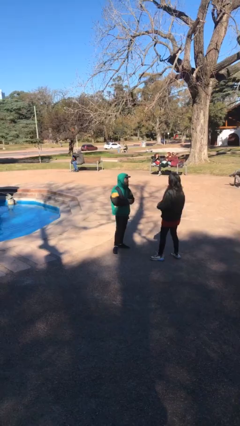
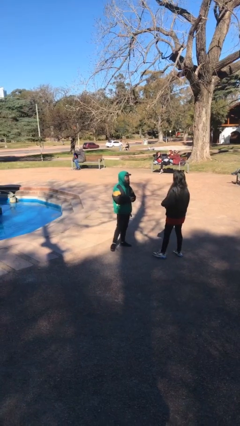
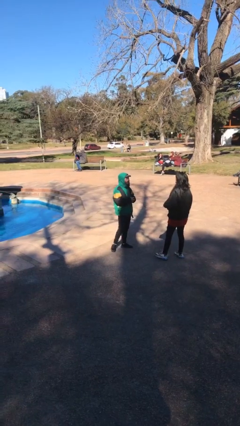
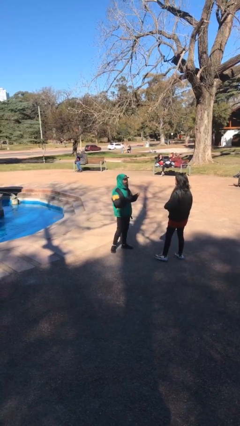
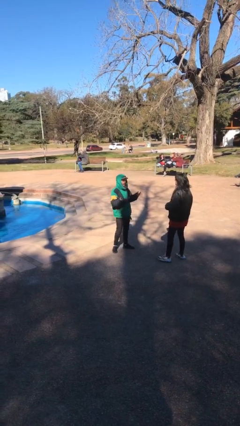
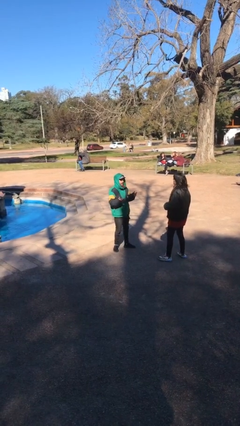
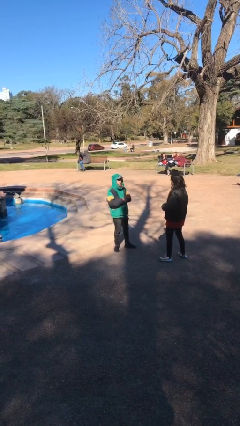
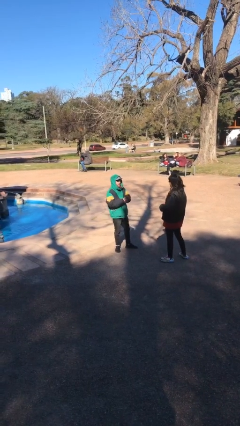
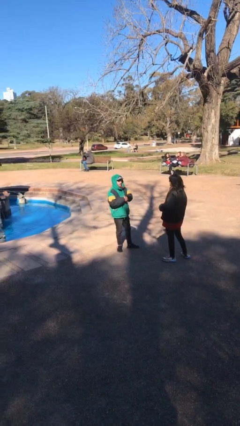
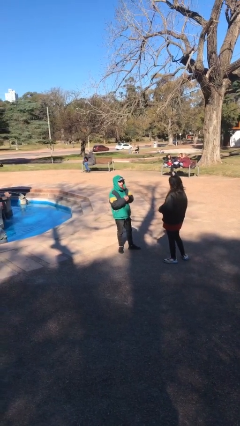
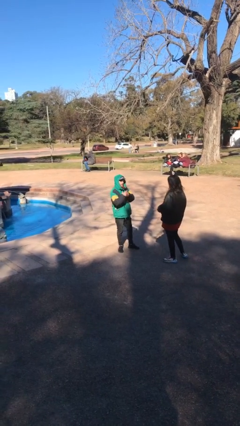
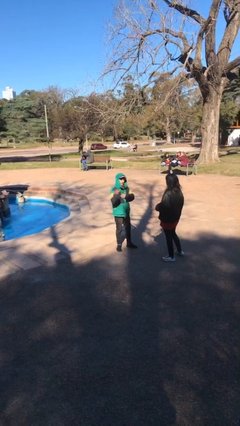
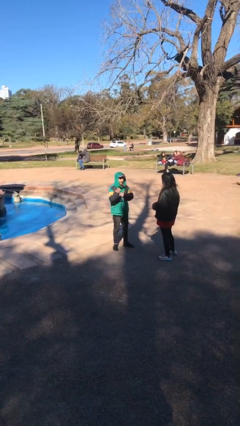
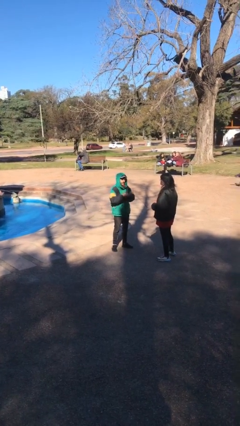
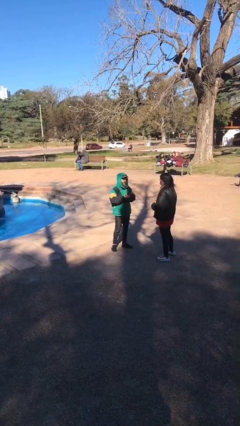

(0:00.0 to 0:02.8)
person talks to person

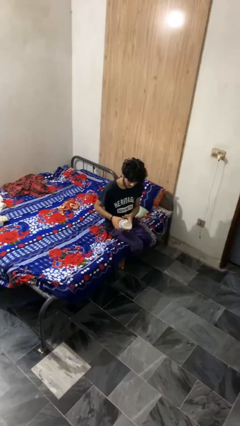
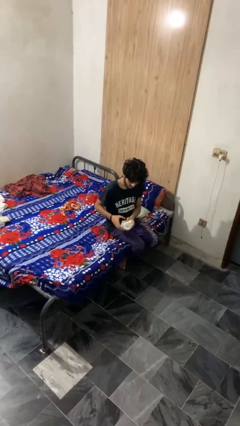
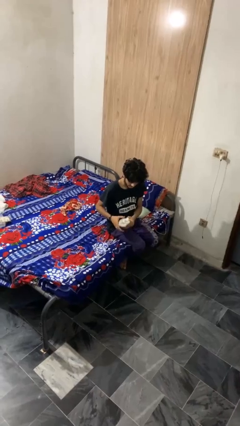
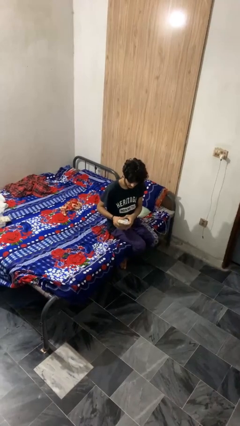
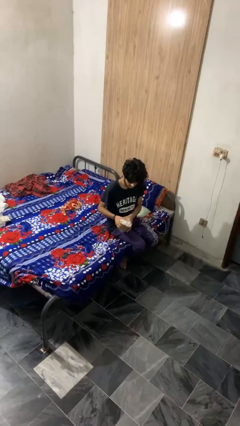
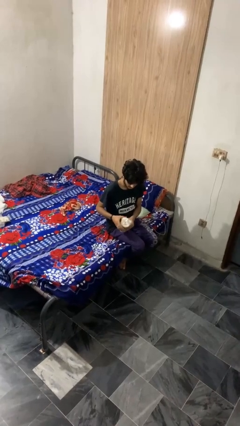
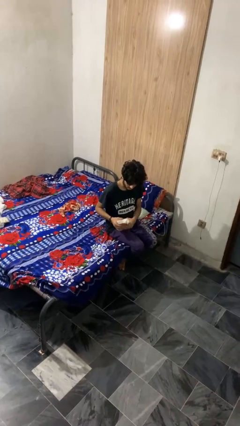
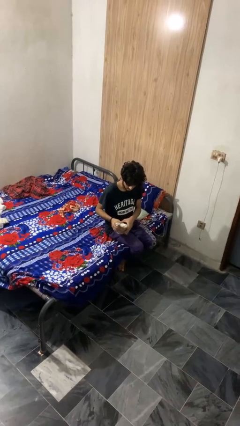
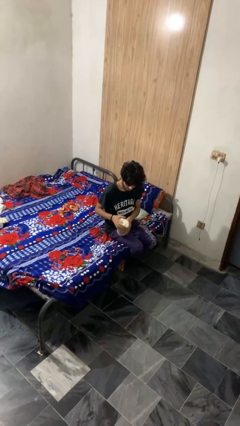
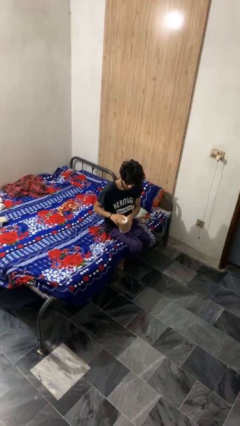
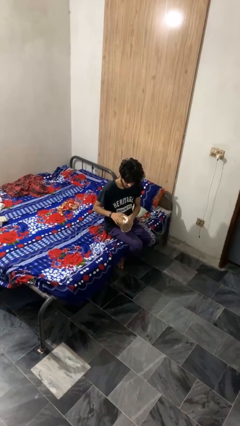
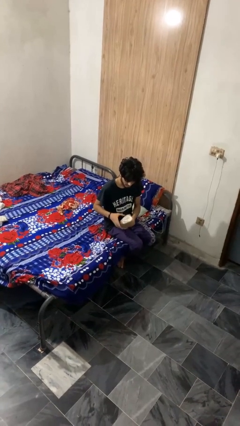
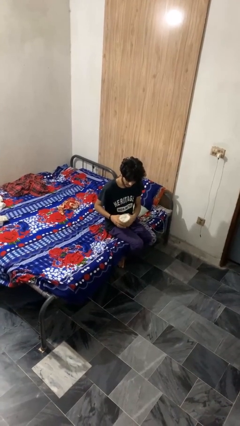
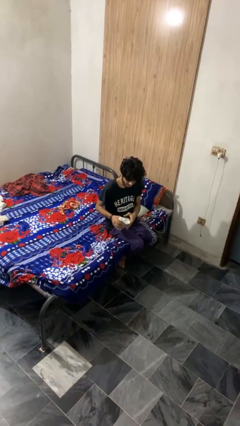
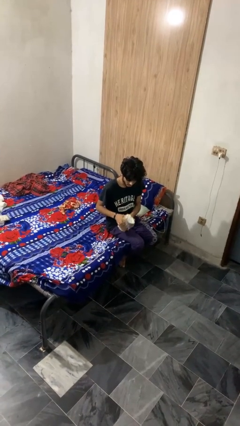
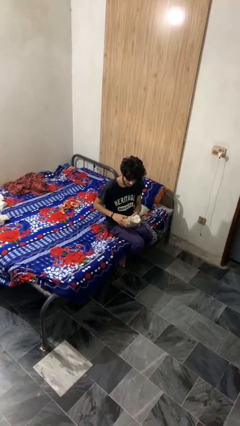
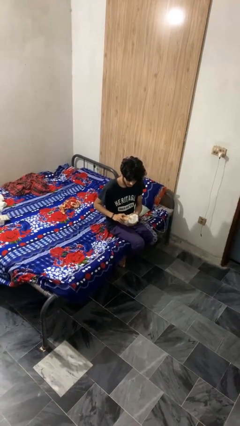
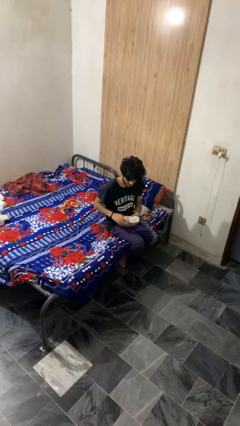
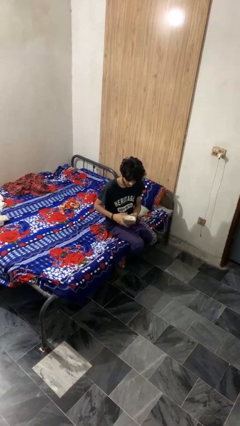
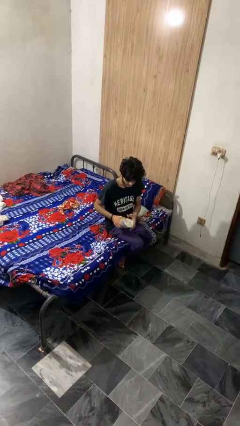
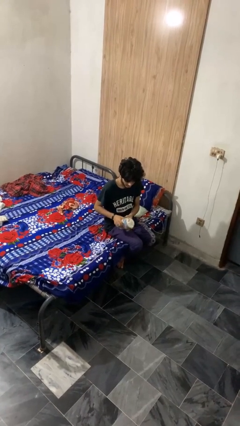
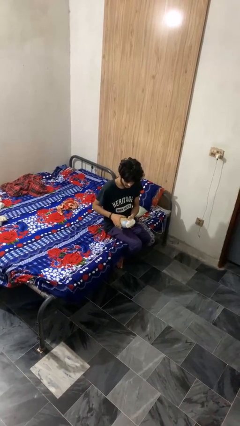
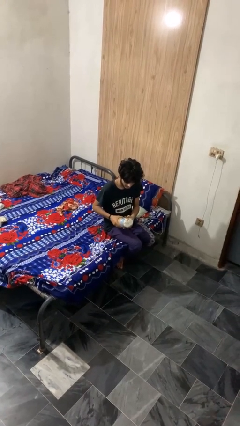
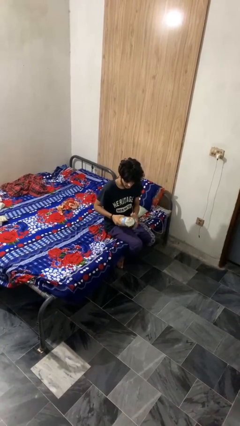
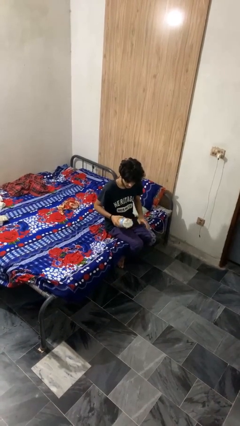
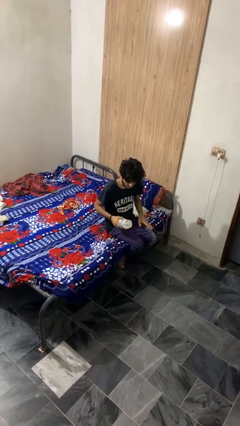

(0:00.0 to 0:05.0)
person squeezes object

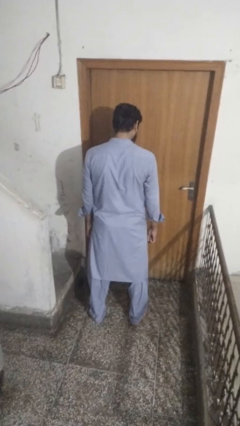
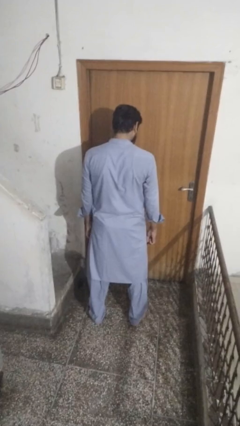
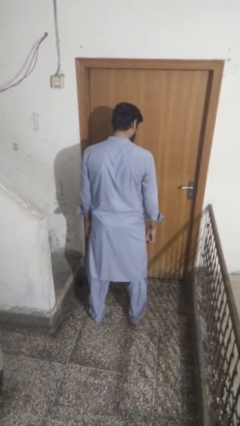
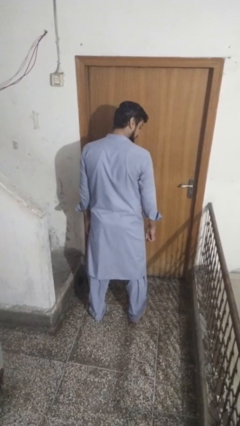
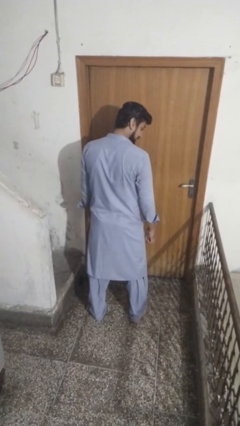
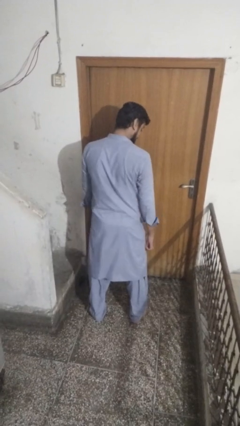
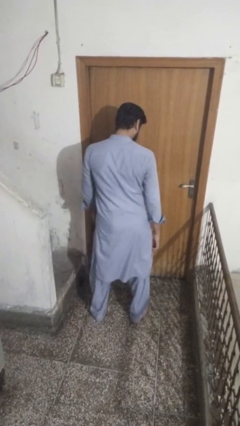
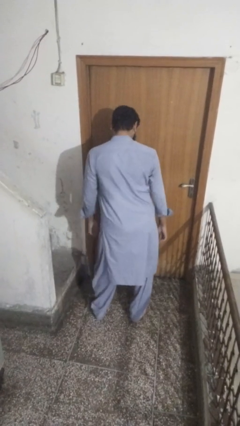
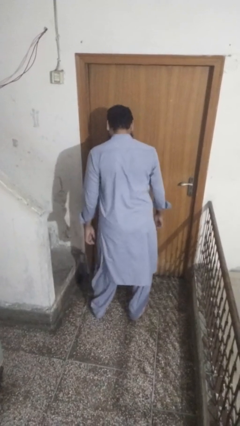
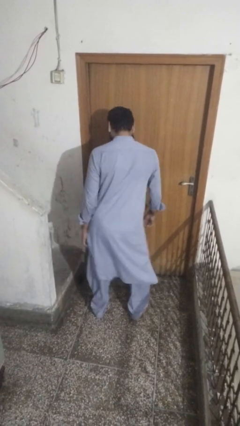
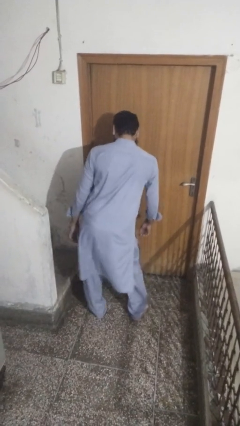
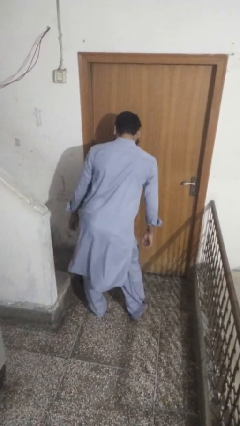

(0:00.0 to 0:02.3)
person wiggles hips

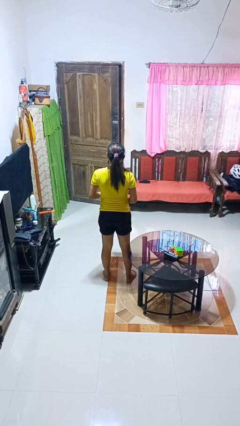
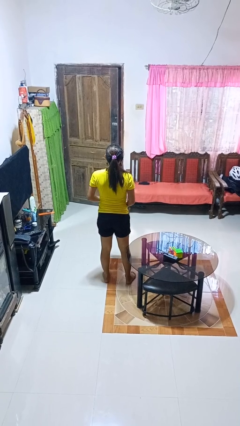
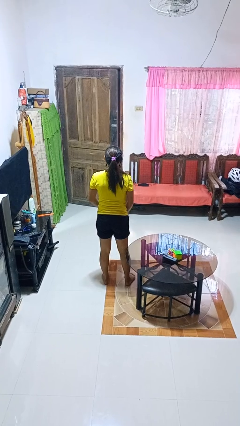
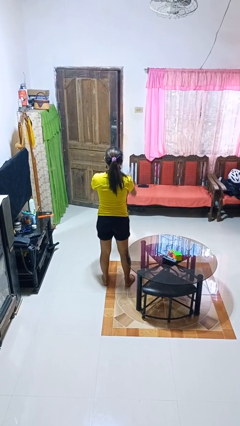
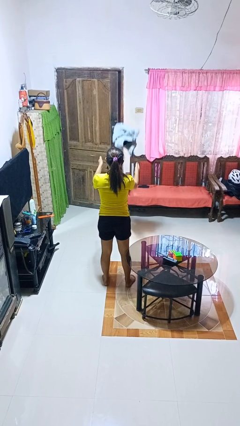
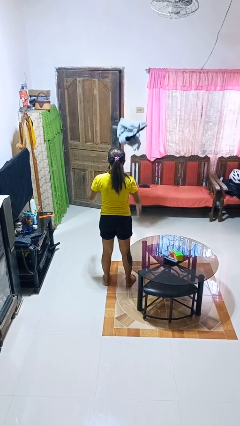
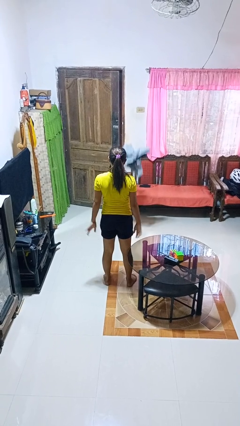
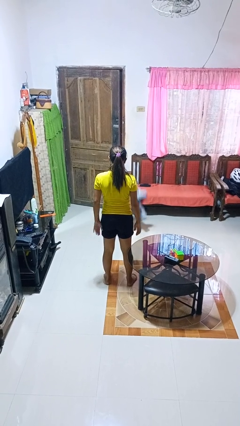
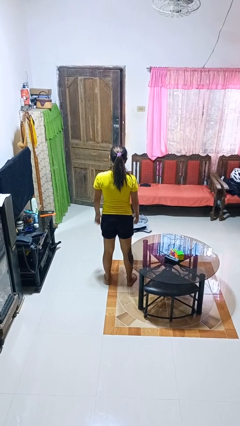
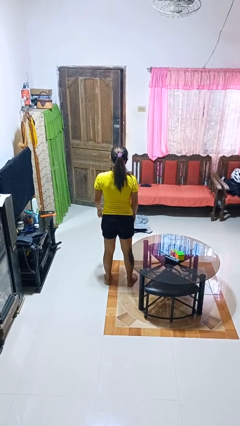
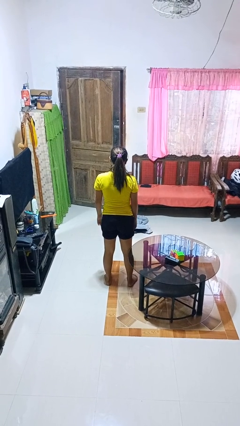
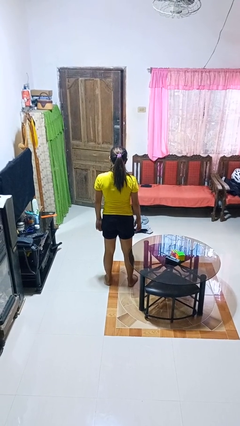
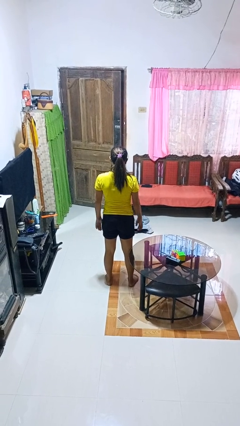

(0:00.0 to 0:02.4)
person throws object into air

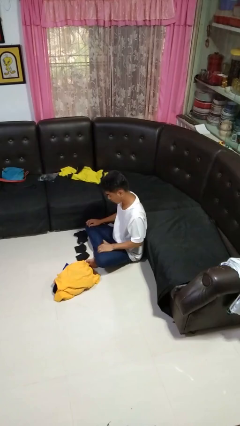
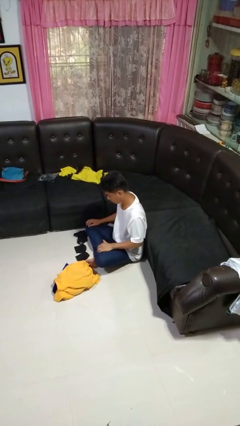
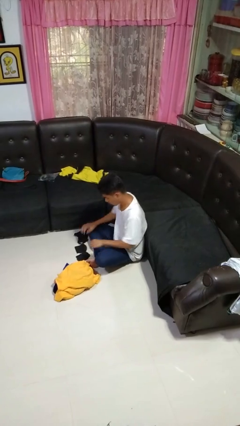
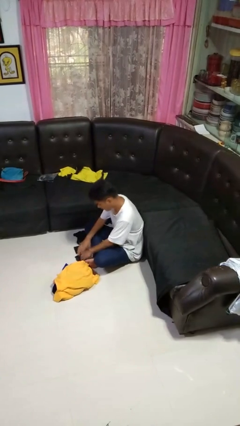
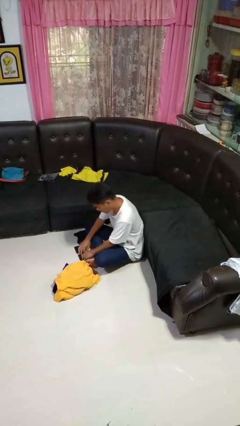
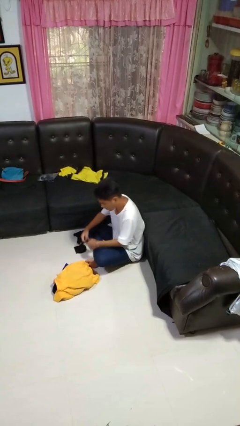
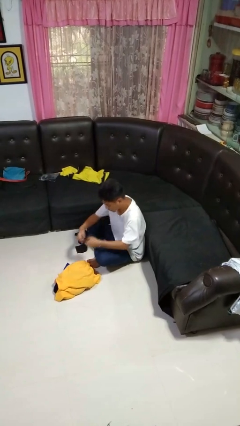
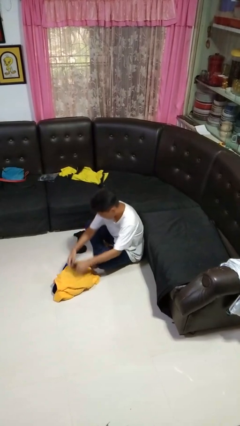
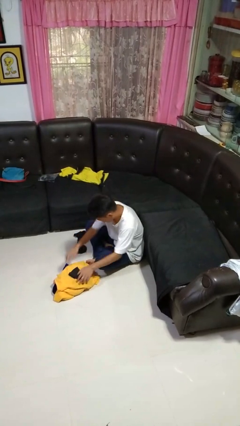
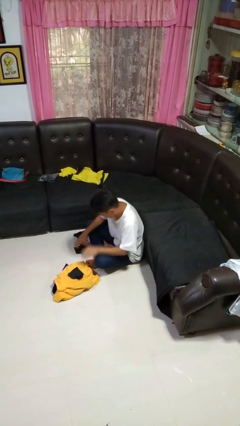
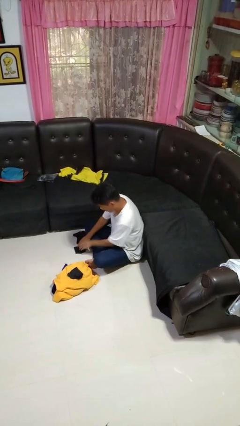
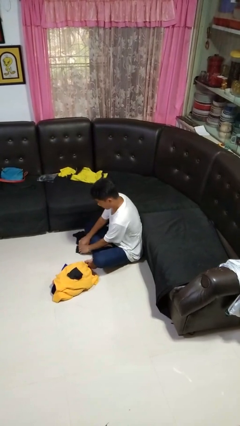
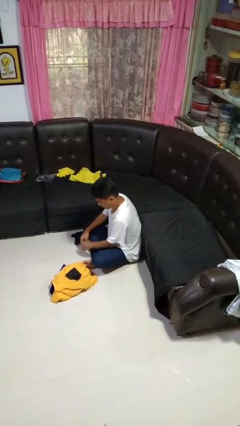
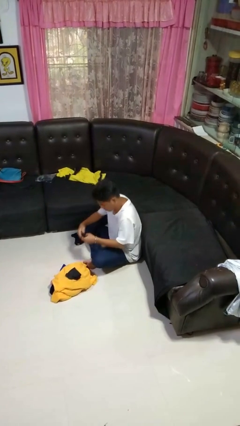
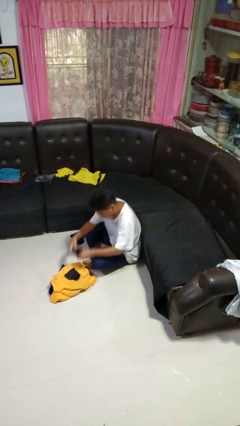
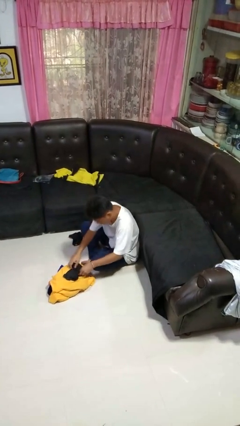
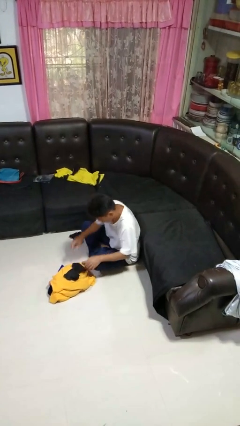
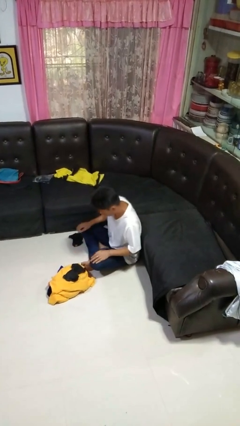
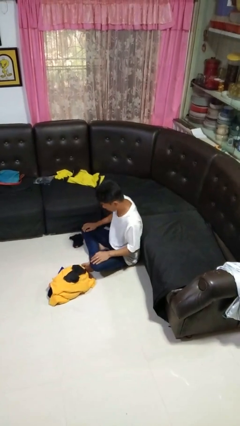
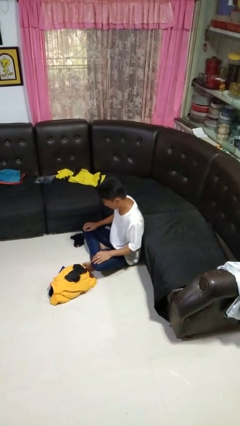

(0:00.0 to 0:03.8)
person folds socks

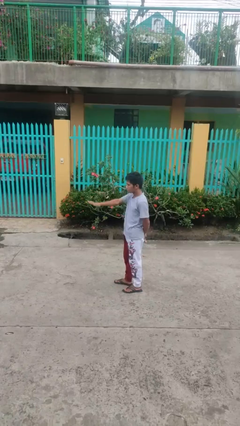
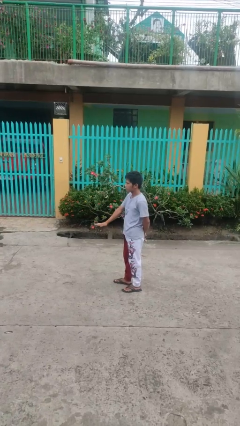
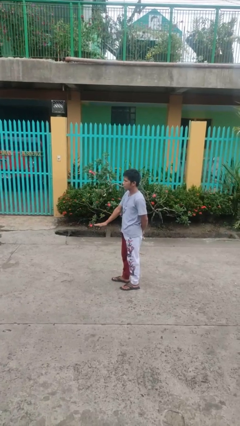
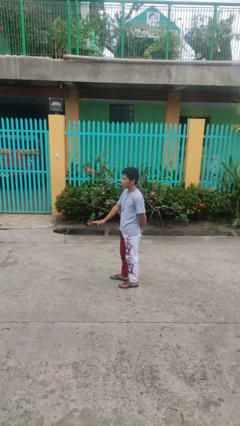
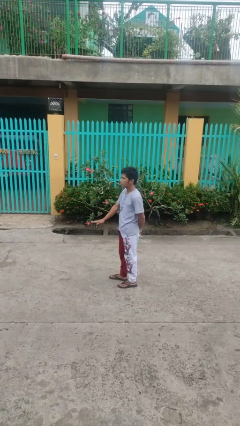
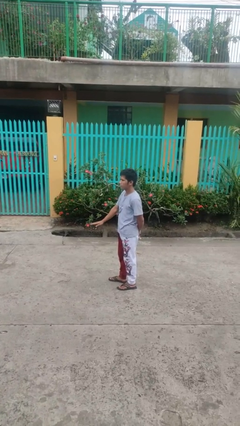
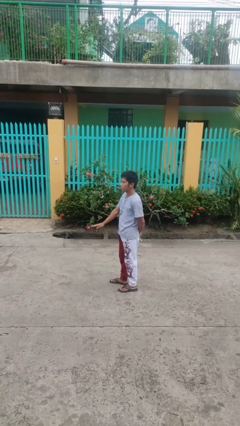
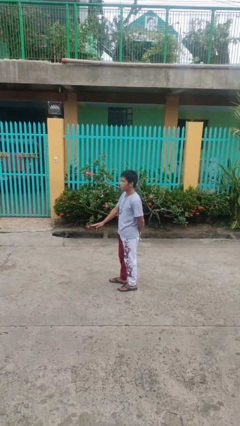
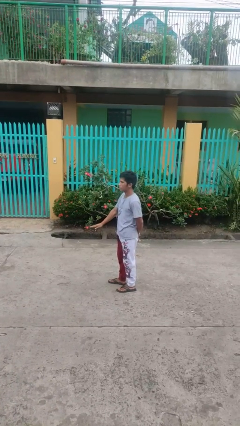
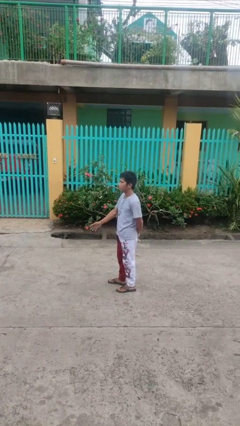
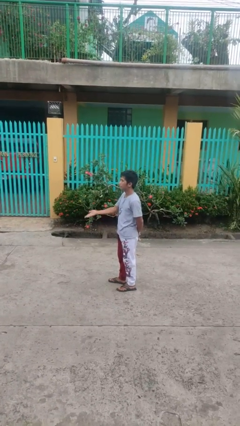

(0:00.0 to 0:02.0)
person gestures swipe down
